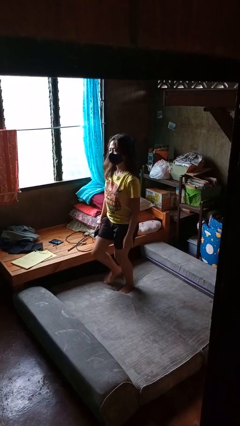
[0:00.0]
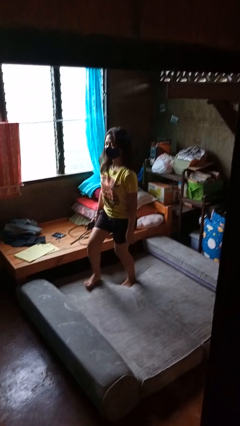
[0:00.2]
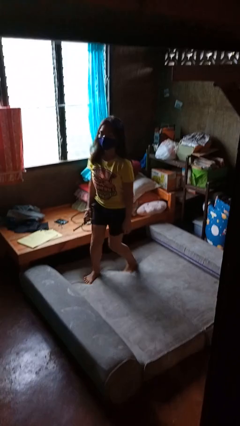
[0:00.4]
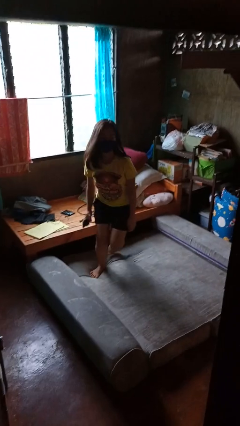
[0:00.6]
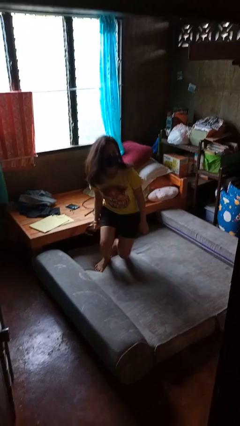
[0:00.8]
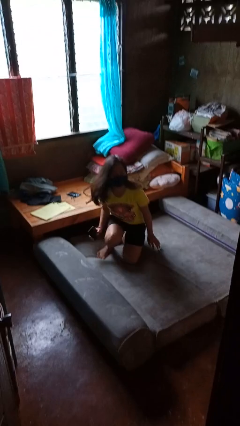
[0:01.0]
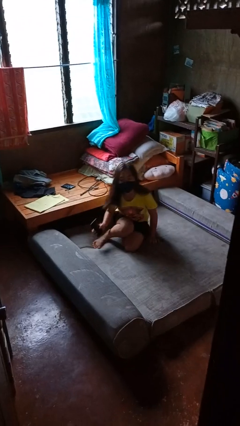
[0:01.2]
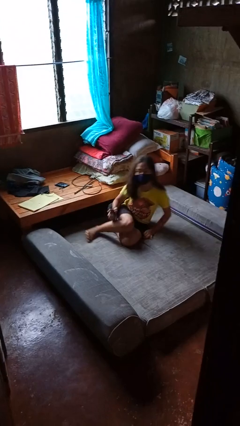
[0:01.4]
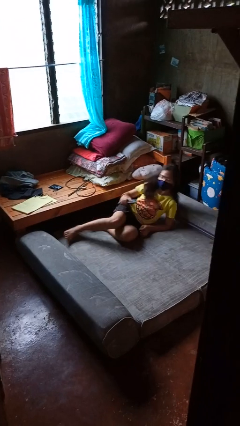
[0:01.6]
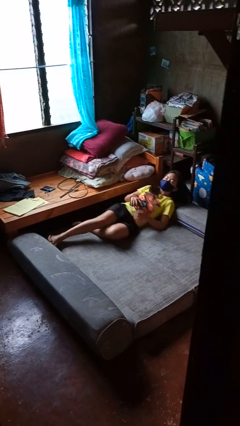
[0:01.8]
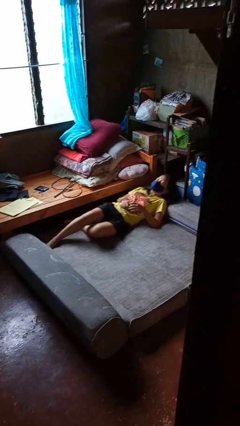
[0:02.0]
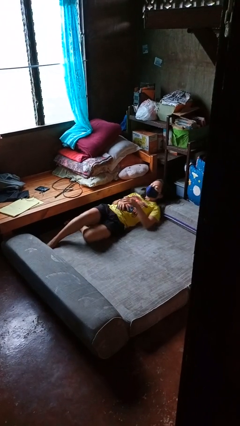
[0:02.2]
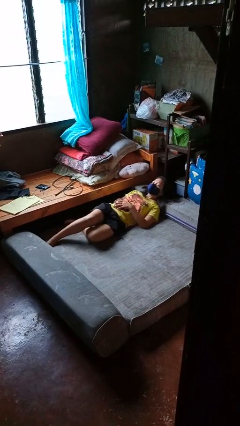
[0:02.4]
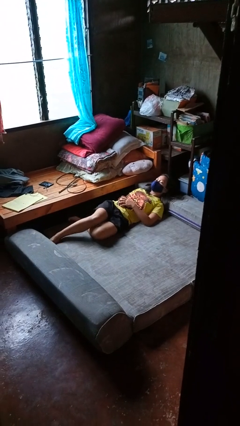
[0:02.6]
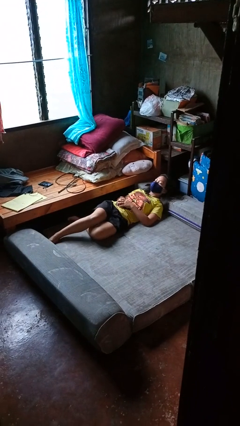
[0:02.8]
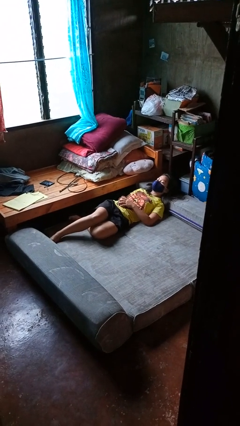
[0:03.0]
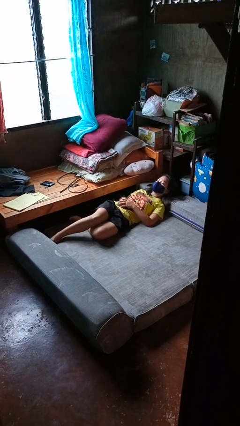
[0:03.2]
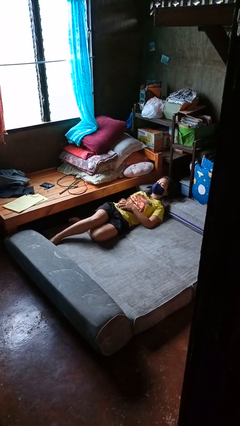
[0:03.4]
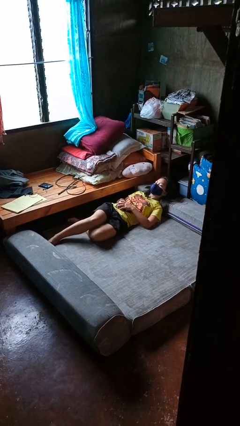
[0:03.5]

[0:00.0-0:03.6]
person lies down on bed

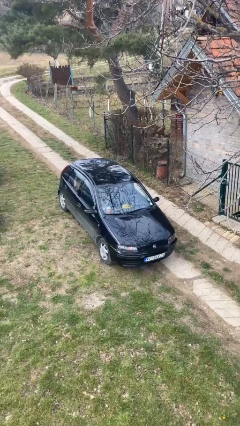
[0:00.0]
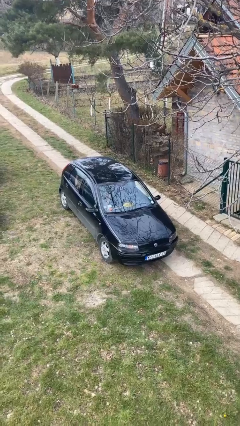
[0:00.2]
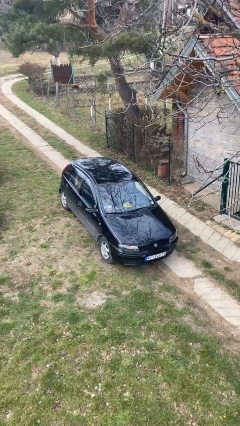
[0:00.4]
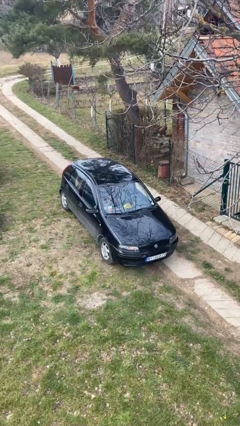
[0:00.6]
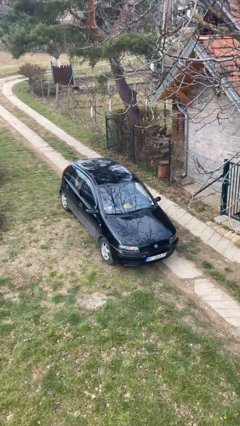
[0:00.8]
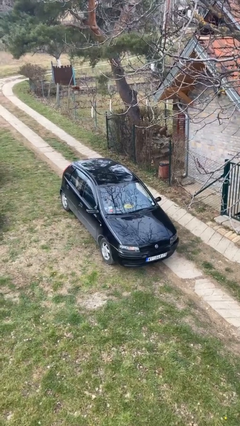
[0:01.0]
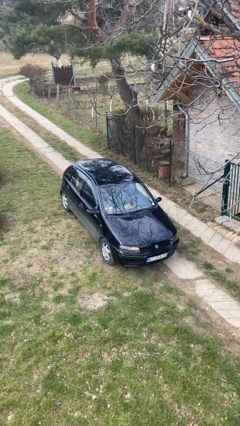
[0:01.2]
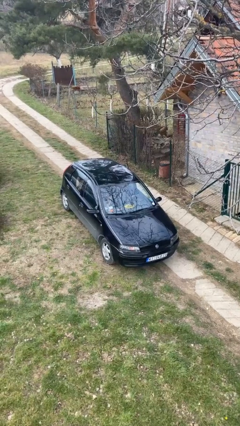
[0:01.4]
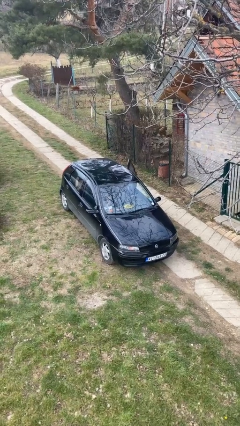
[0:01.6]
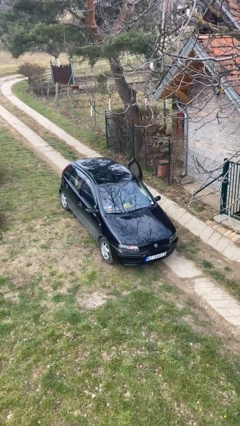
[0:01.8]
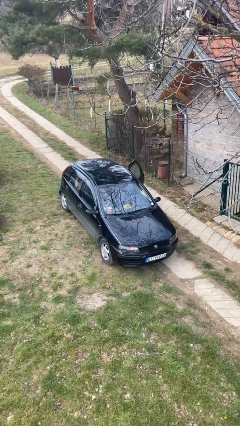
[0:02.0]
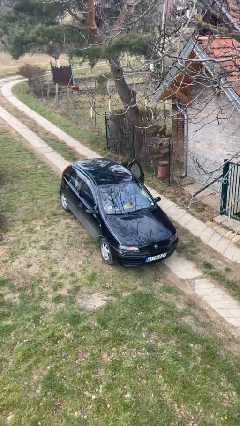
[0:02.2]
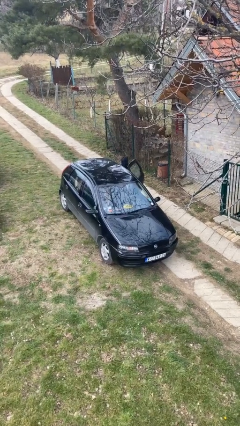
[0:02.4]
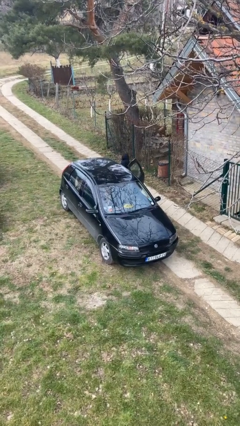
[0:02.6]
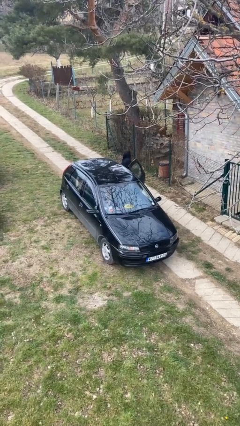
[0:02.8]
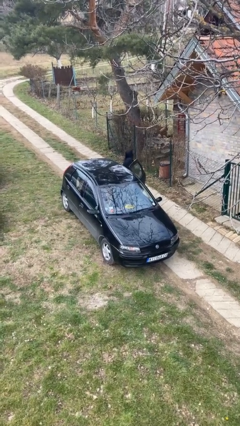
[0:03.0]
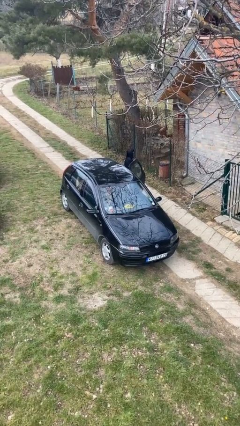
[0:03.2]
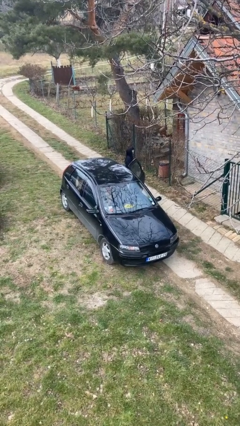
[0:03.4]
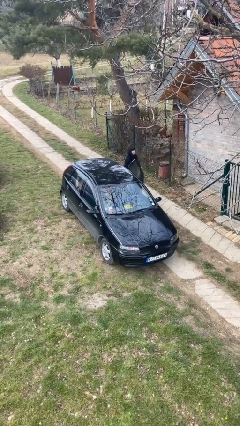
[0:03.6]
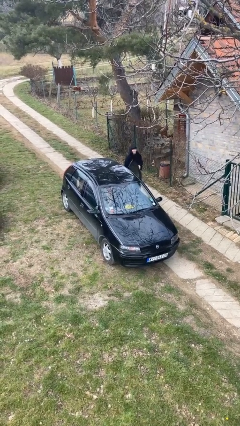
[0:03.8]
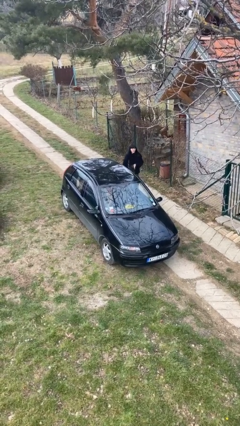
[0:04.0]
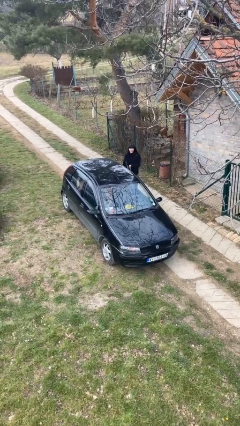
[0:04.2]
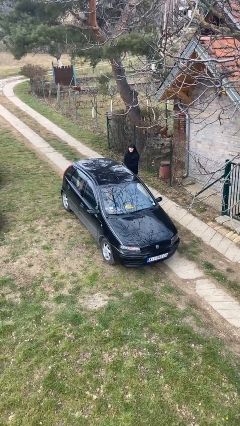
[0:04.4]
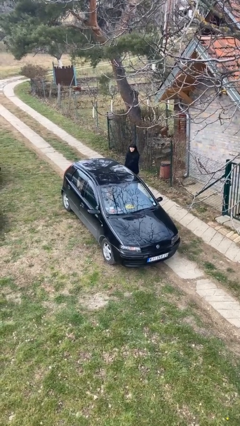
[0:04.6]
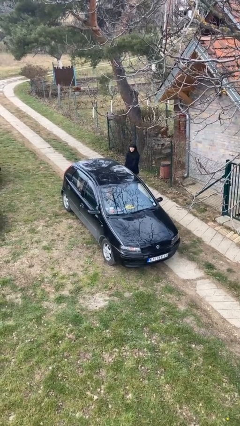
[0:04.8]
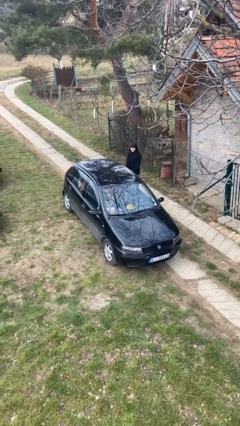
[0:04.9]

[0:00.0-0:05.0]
car drops off person

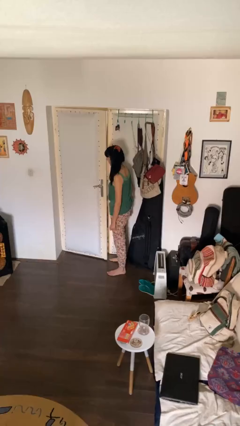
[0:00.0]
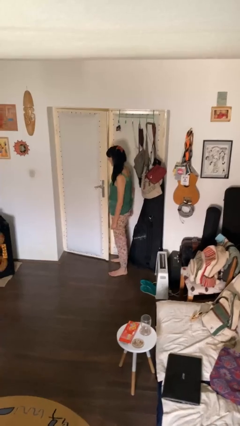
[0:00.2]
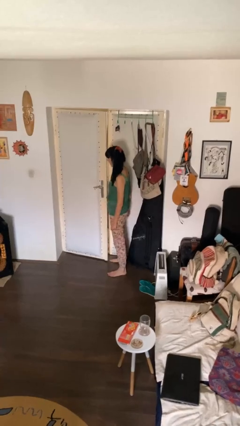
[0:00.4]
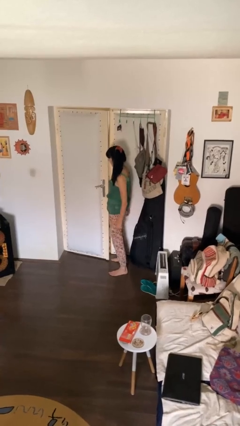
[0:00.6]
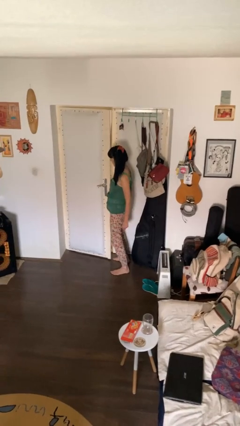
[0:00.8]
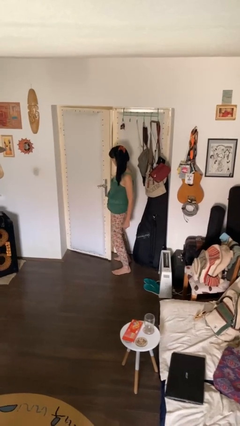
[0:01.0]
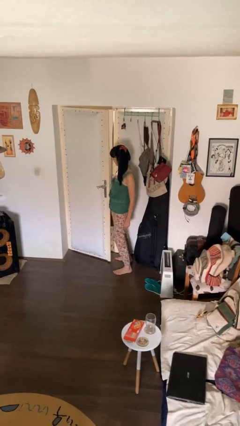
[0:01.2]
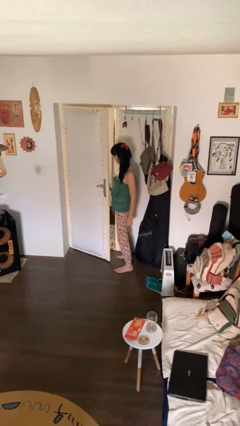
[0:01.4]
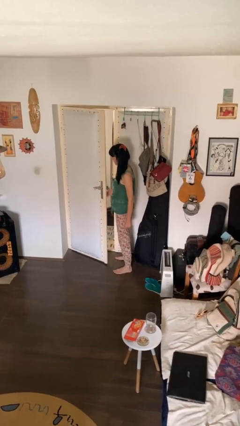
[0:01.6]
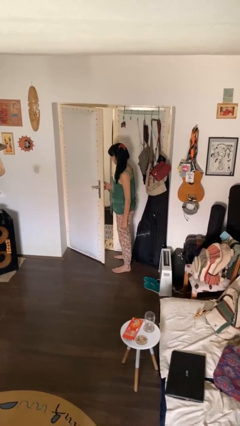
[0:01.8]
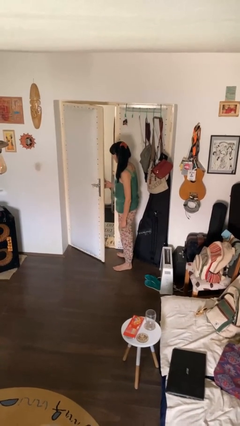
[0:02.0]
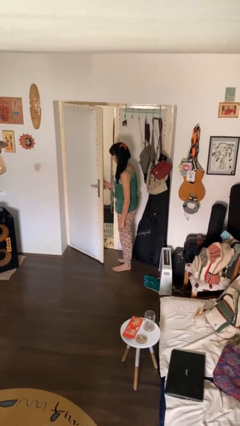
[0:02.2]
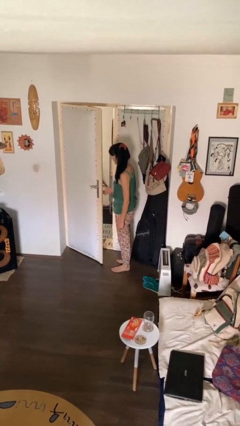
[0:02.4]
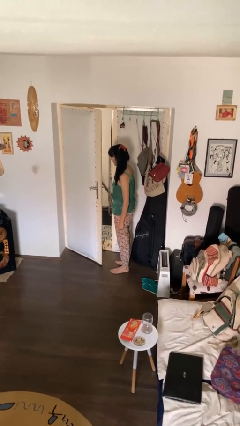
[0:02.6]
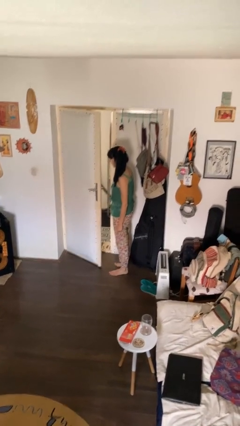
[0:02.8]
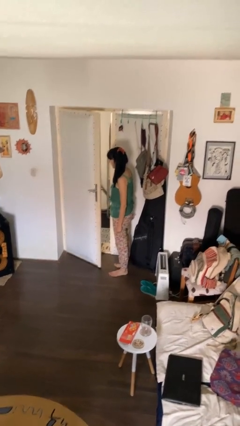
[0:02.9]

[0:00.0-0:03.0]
person opens facility door

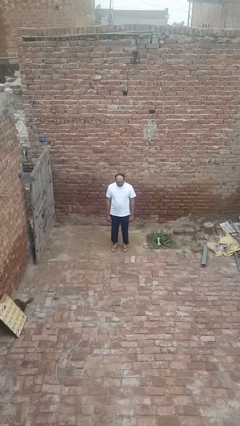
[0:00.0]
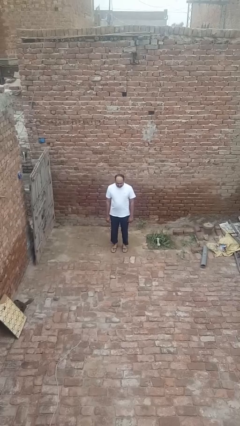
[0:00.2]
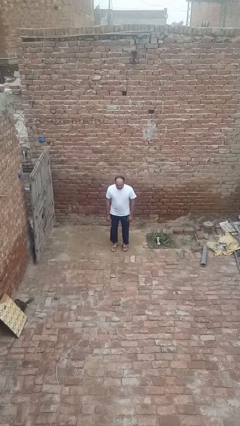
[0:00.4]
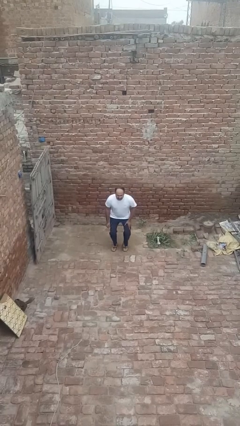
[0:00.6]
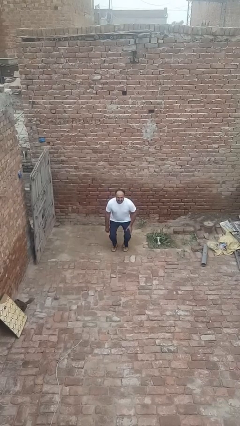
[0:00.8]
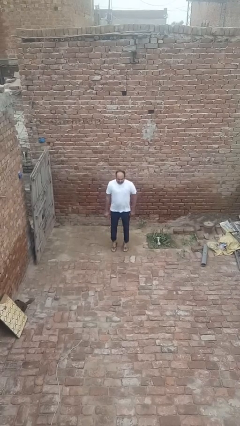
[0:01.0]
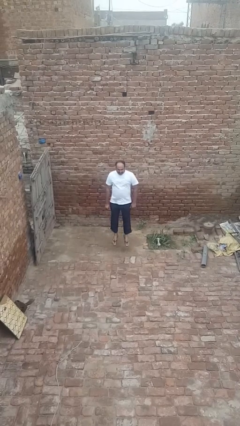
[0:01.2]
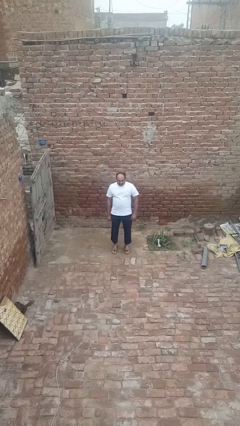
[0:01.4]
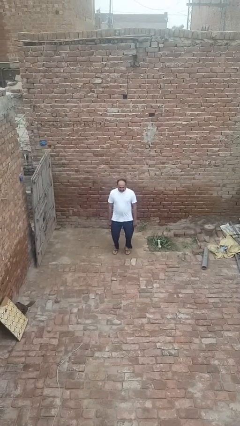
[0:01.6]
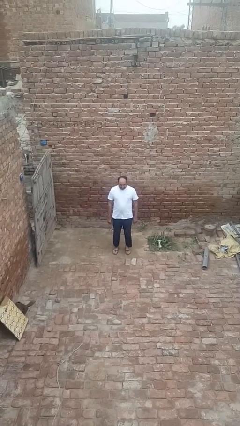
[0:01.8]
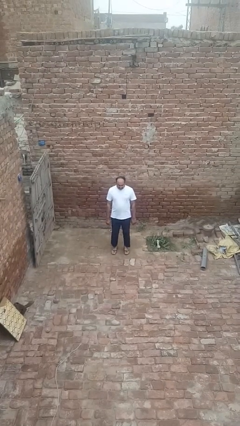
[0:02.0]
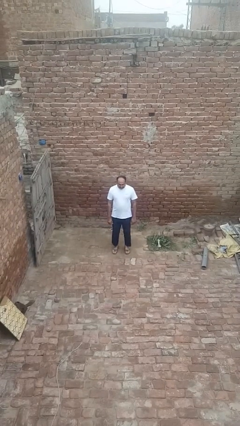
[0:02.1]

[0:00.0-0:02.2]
person jumps

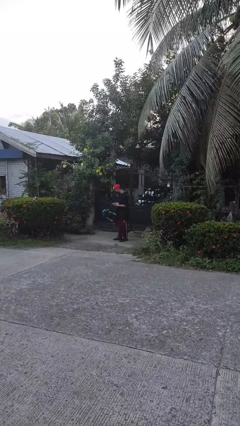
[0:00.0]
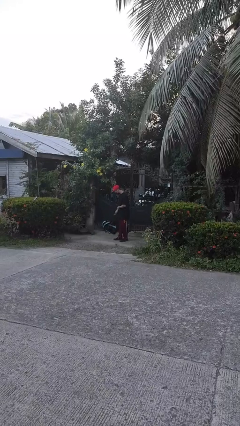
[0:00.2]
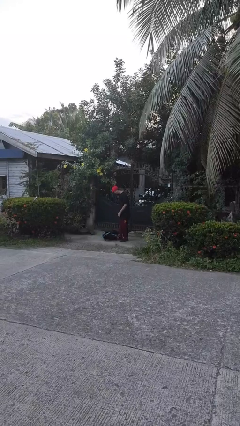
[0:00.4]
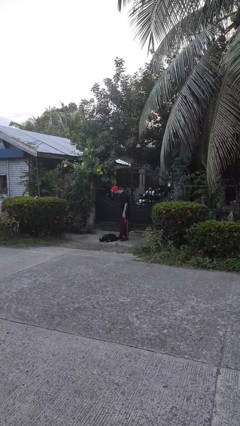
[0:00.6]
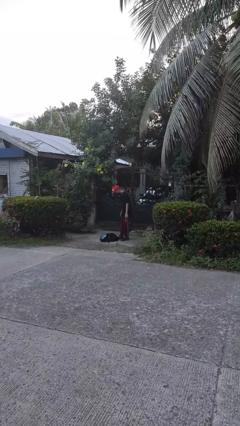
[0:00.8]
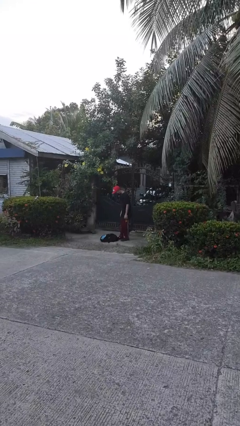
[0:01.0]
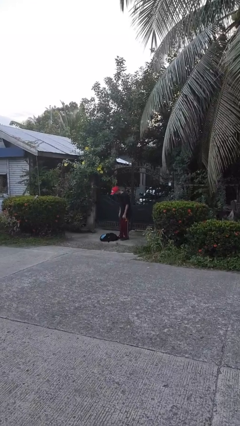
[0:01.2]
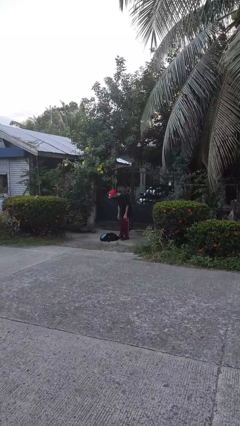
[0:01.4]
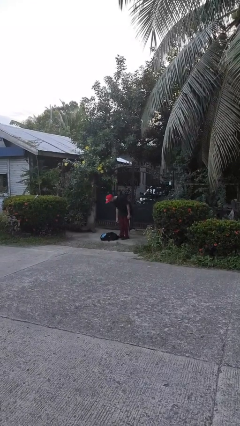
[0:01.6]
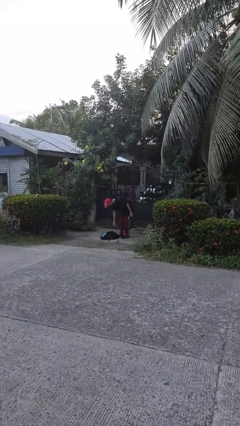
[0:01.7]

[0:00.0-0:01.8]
person drops object

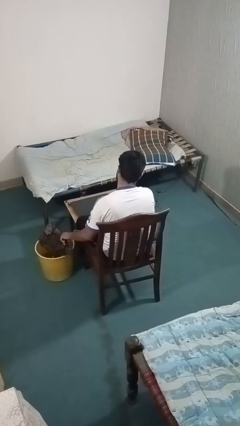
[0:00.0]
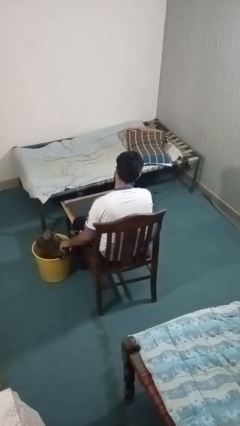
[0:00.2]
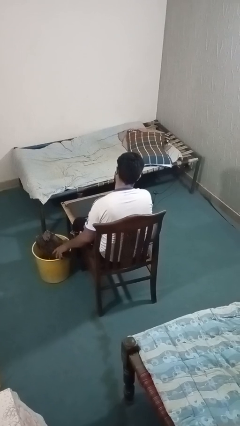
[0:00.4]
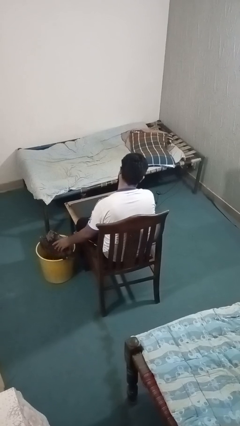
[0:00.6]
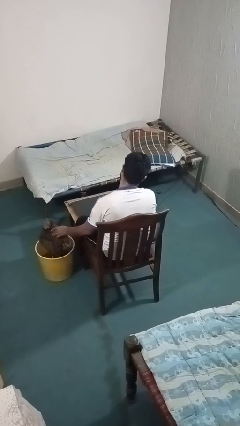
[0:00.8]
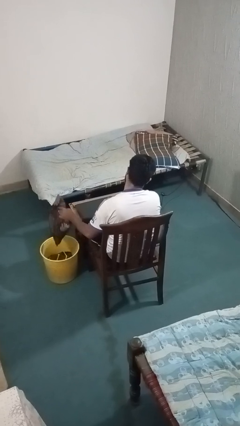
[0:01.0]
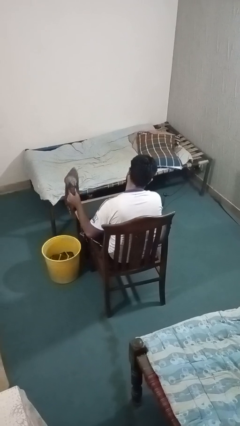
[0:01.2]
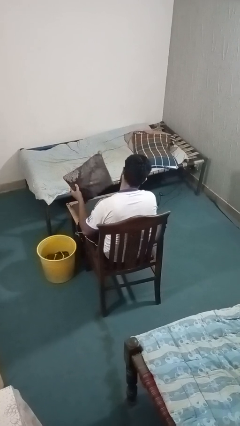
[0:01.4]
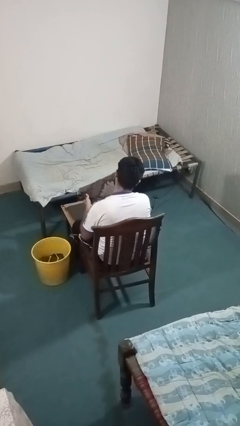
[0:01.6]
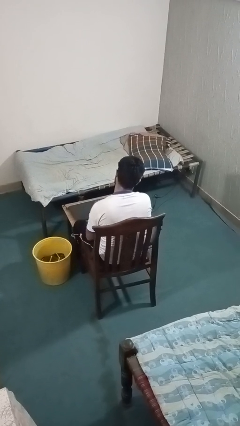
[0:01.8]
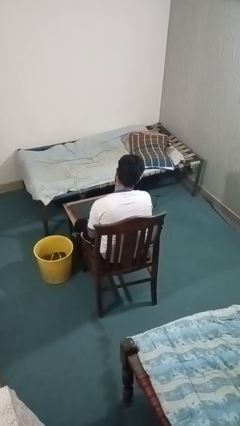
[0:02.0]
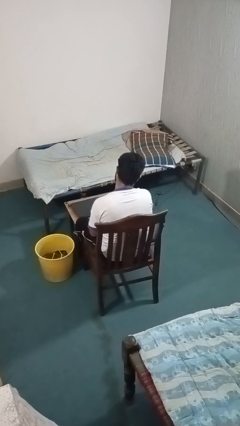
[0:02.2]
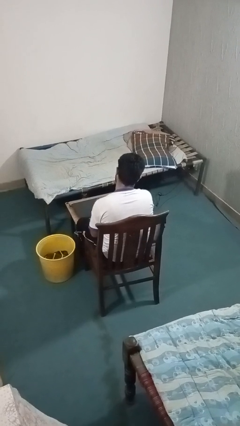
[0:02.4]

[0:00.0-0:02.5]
person takes object from basket
